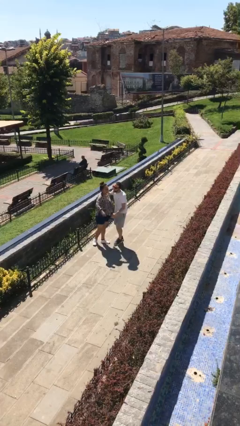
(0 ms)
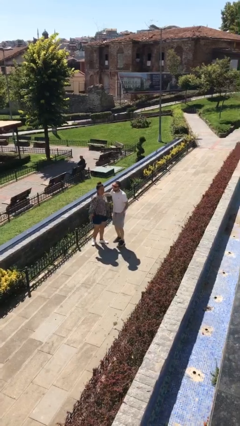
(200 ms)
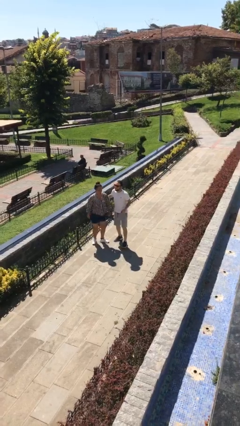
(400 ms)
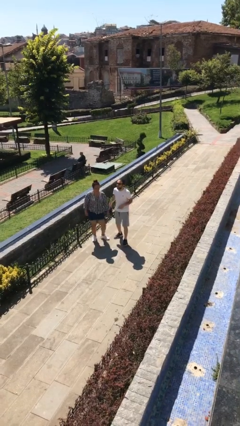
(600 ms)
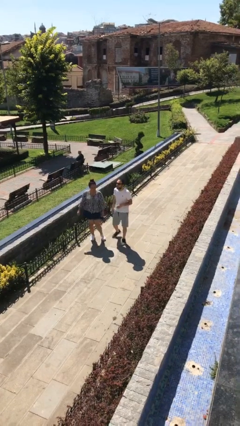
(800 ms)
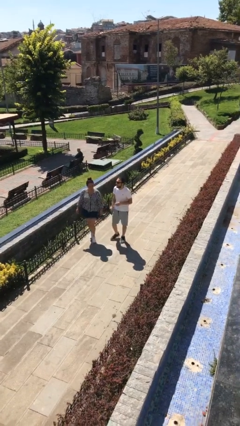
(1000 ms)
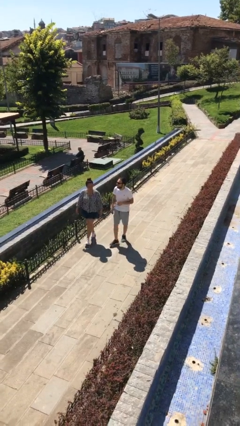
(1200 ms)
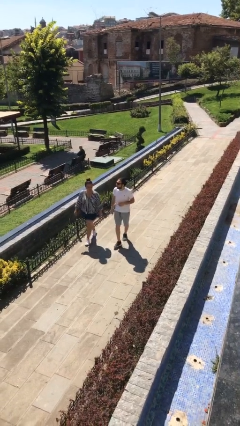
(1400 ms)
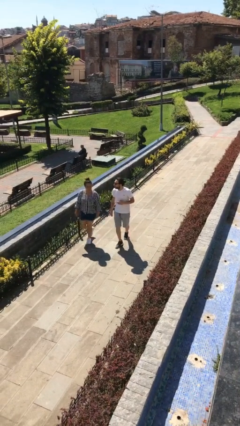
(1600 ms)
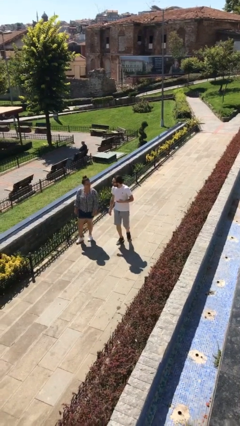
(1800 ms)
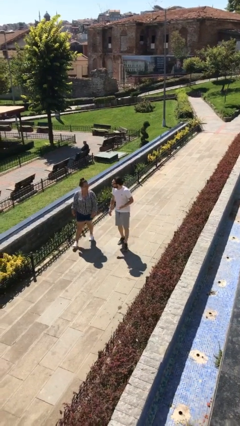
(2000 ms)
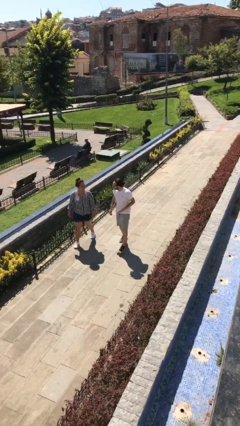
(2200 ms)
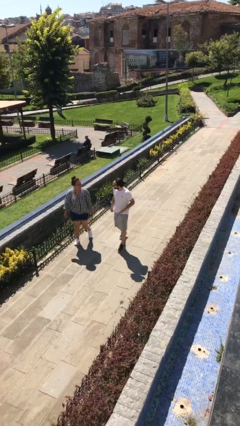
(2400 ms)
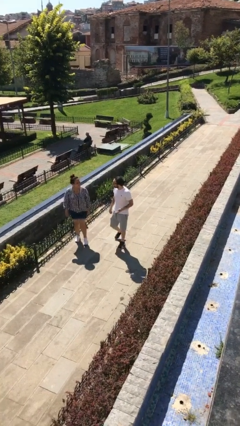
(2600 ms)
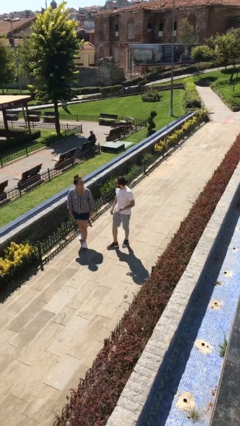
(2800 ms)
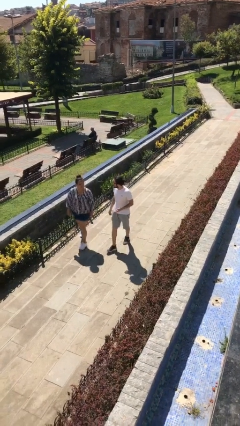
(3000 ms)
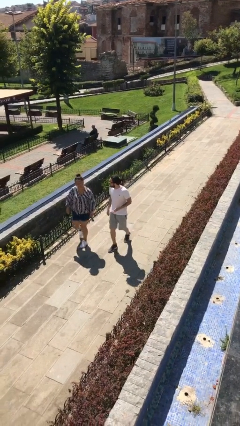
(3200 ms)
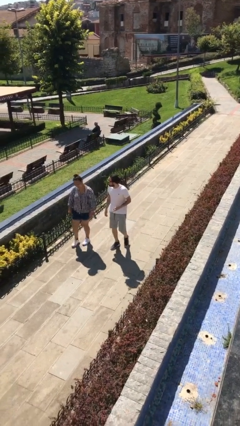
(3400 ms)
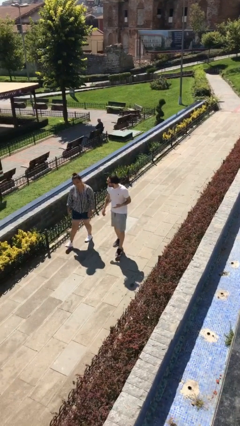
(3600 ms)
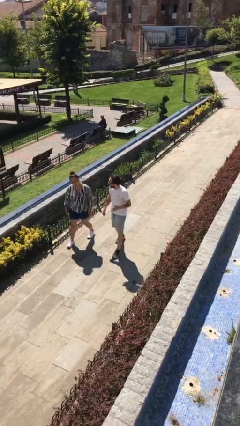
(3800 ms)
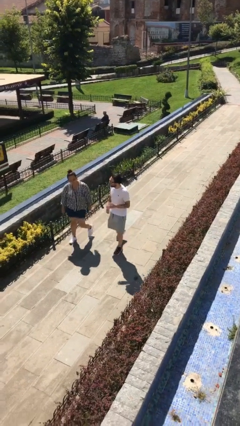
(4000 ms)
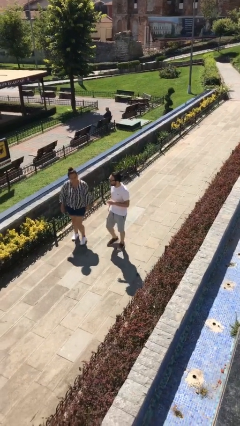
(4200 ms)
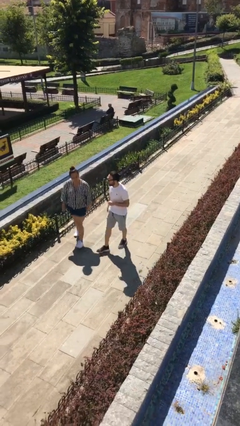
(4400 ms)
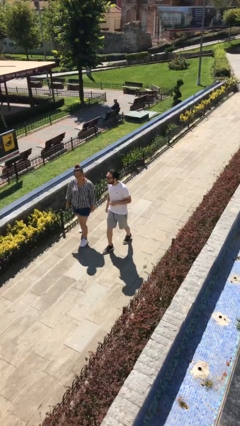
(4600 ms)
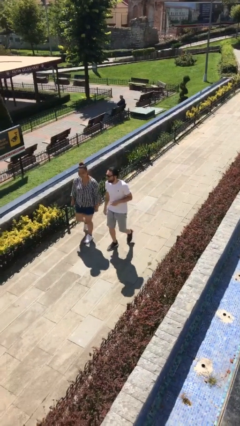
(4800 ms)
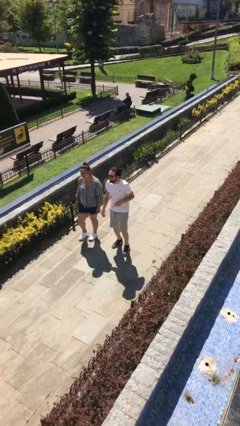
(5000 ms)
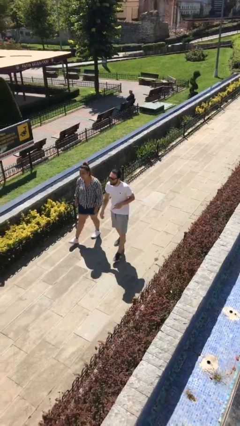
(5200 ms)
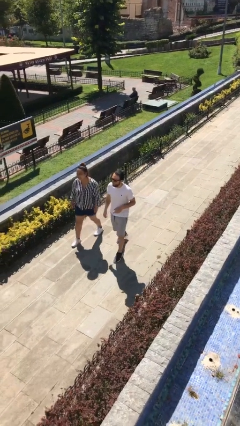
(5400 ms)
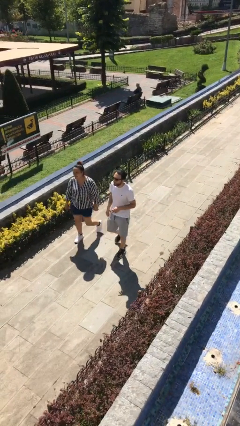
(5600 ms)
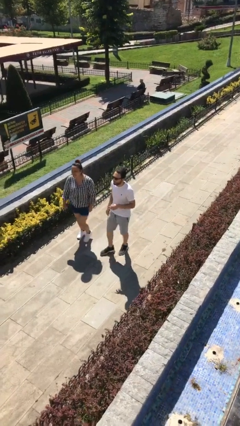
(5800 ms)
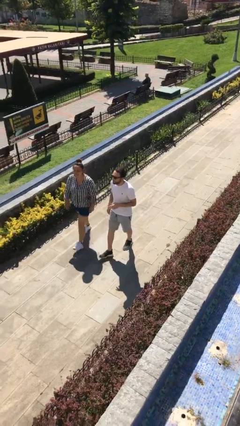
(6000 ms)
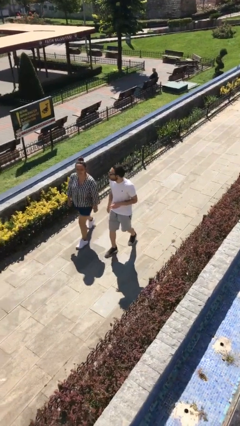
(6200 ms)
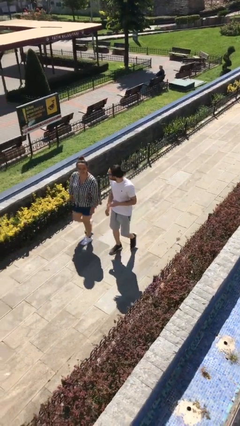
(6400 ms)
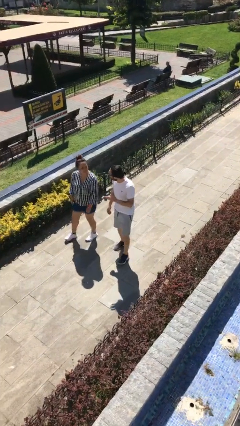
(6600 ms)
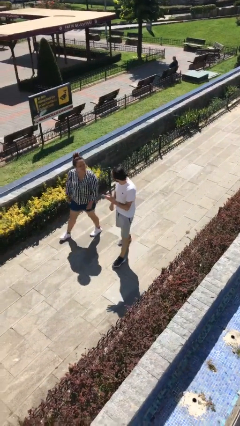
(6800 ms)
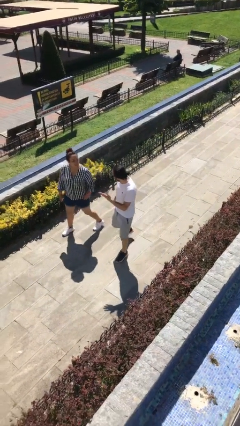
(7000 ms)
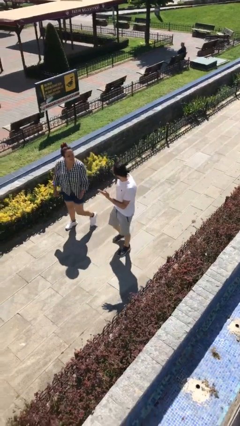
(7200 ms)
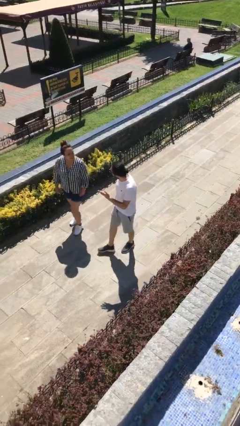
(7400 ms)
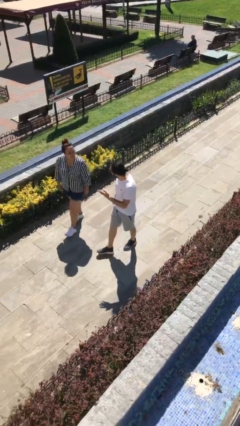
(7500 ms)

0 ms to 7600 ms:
person talks to person

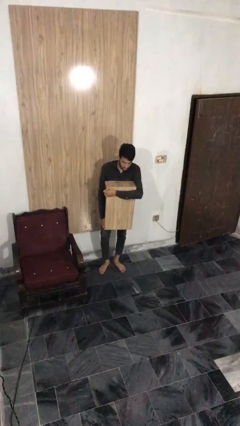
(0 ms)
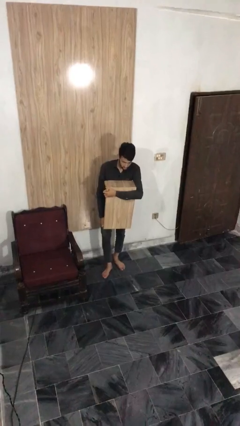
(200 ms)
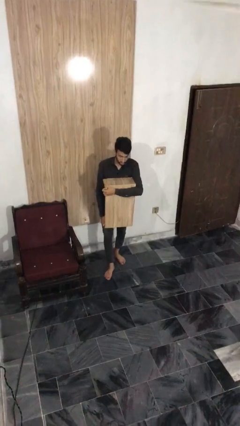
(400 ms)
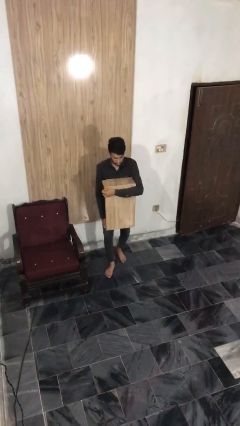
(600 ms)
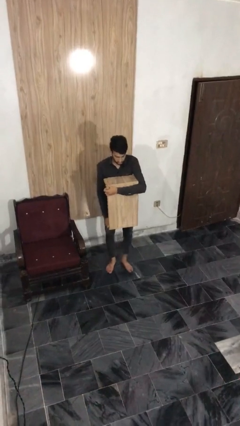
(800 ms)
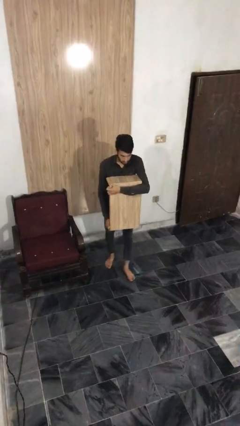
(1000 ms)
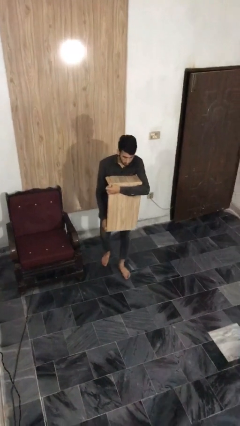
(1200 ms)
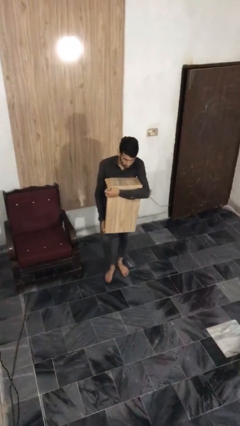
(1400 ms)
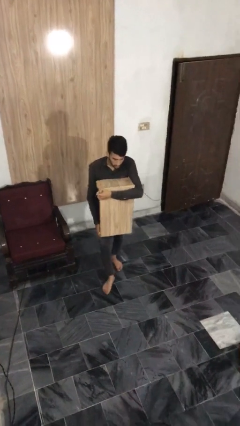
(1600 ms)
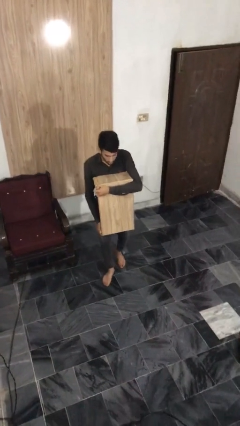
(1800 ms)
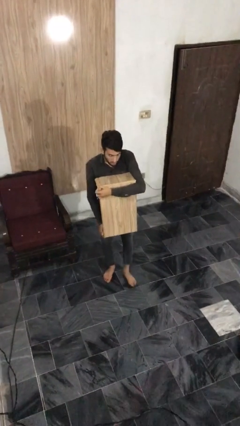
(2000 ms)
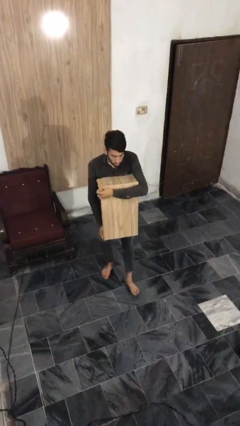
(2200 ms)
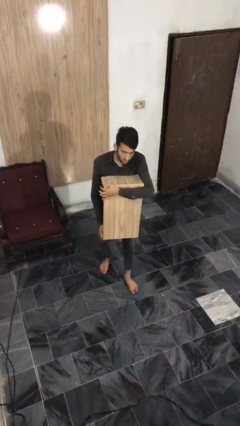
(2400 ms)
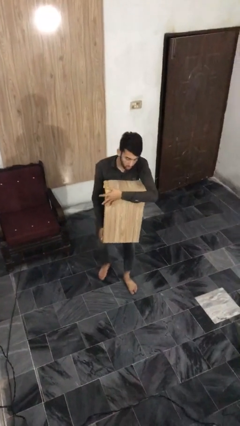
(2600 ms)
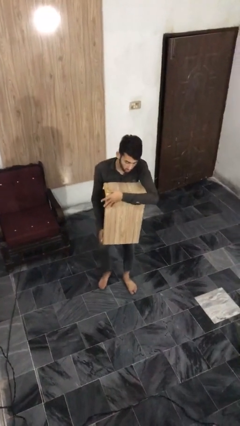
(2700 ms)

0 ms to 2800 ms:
person carries heavy object

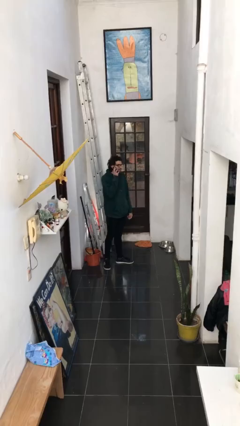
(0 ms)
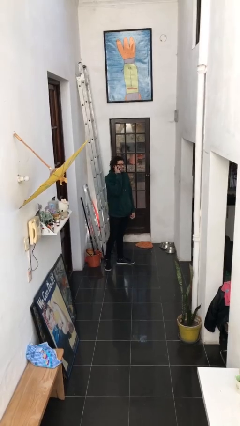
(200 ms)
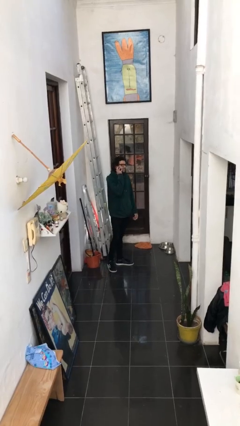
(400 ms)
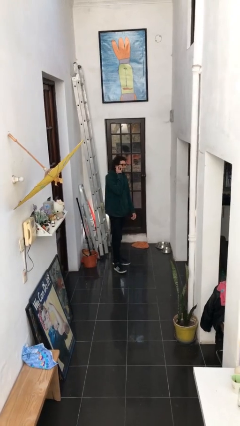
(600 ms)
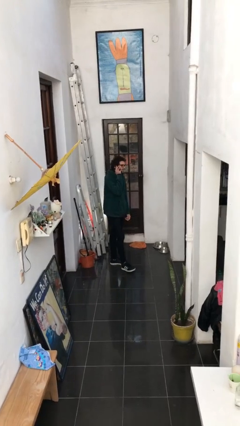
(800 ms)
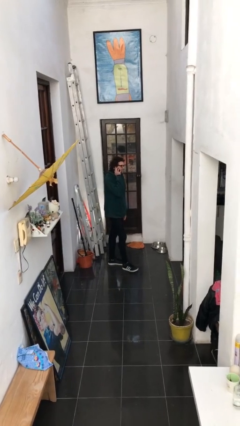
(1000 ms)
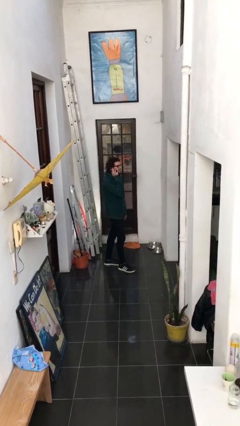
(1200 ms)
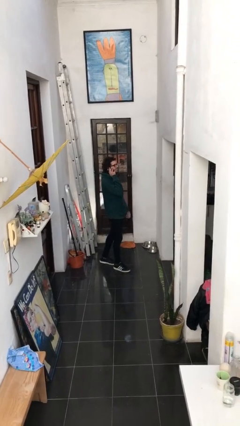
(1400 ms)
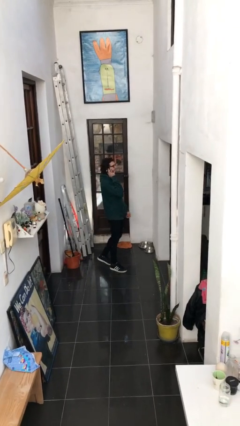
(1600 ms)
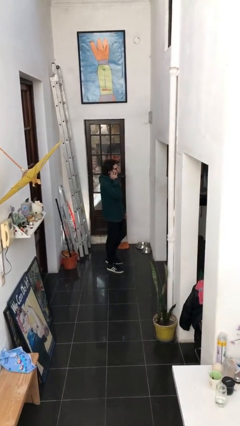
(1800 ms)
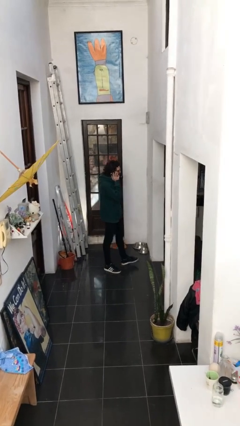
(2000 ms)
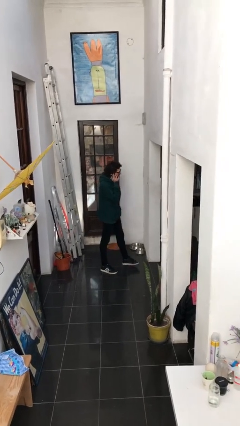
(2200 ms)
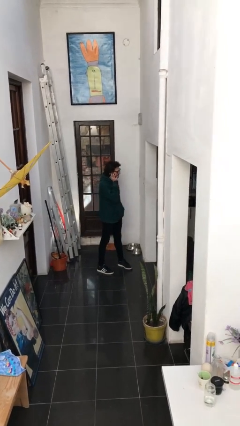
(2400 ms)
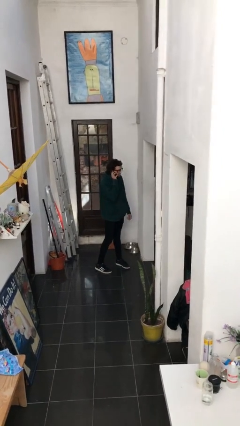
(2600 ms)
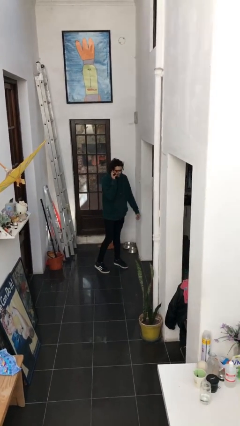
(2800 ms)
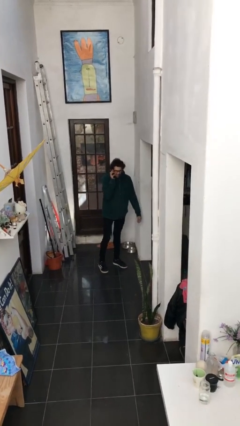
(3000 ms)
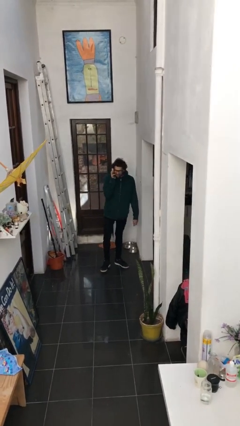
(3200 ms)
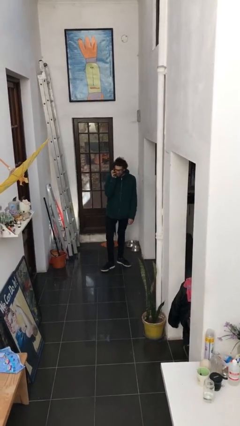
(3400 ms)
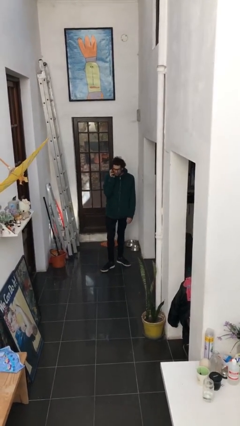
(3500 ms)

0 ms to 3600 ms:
person talks on phone

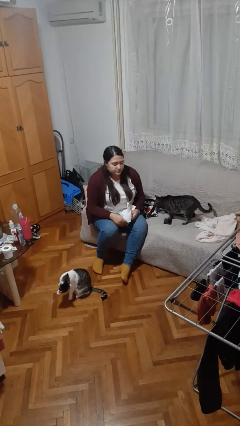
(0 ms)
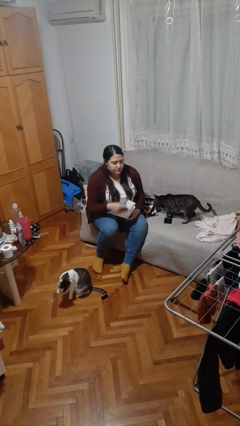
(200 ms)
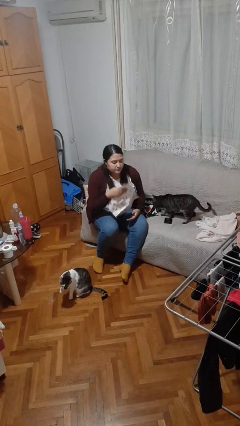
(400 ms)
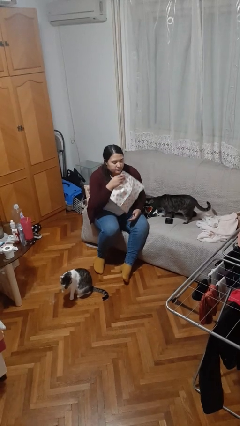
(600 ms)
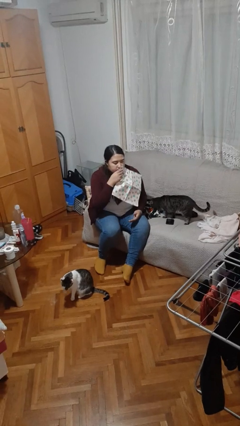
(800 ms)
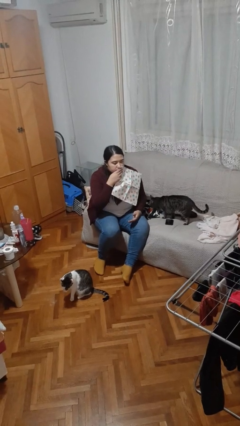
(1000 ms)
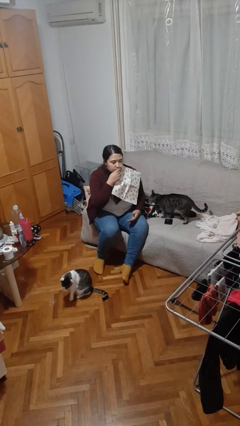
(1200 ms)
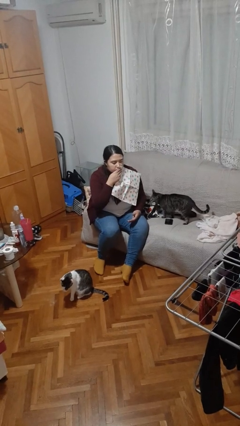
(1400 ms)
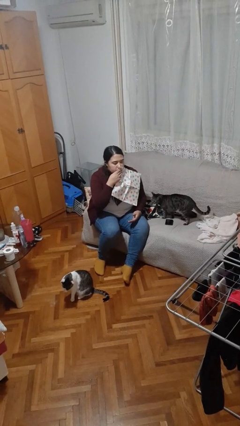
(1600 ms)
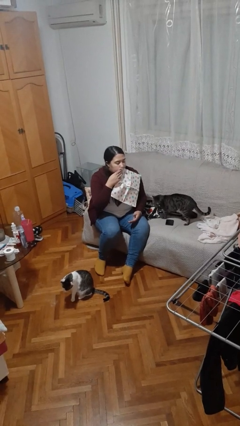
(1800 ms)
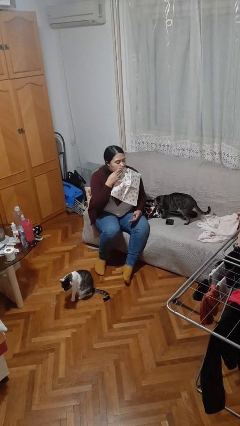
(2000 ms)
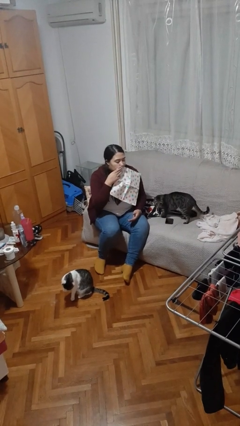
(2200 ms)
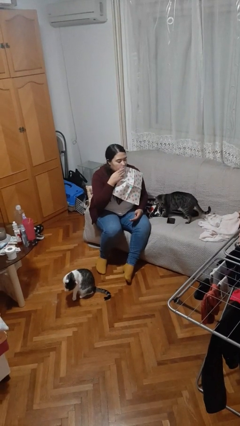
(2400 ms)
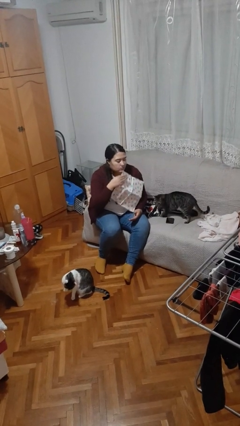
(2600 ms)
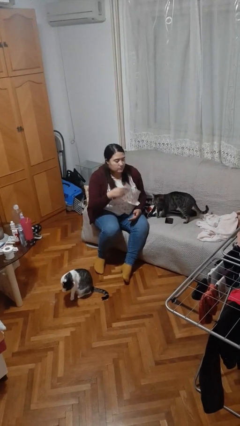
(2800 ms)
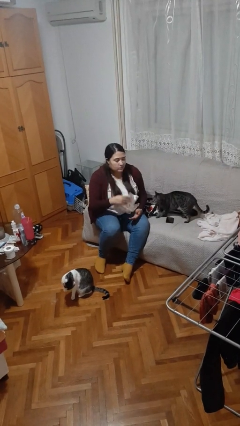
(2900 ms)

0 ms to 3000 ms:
person wipes mouth with napkin

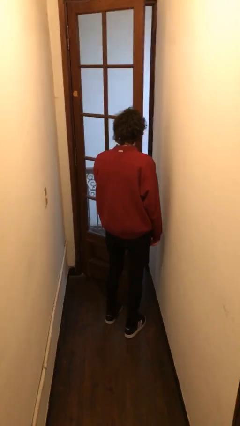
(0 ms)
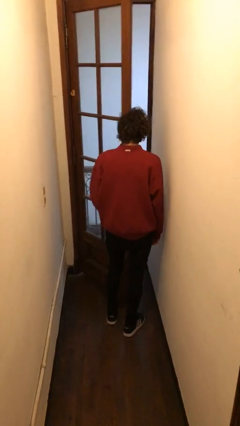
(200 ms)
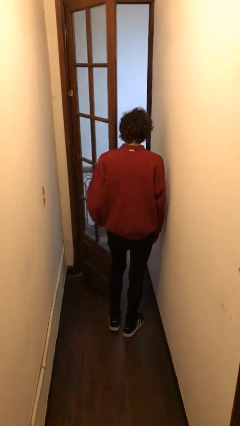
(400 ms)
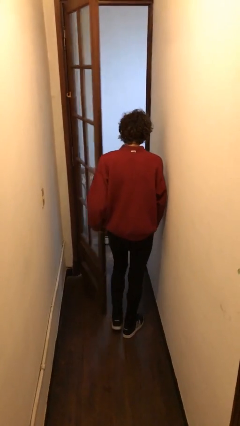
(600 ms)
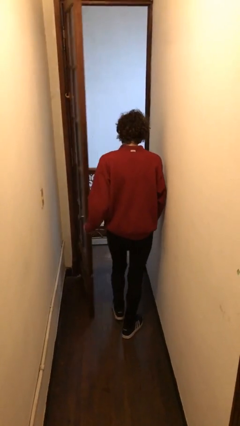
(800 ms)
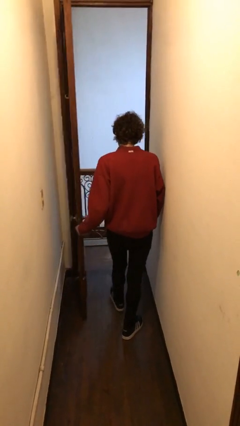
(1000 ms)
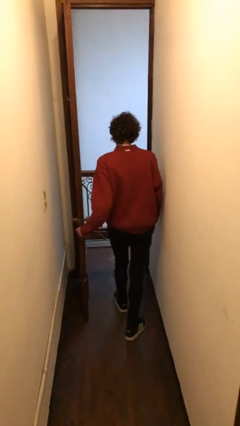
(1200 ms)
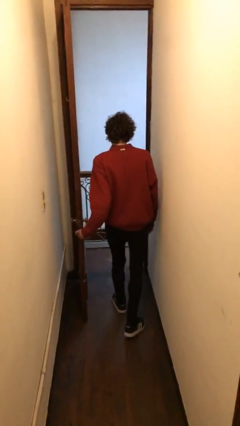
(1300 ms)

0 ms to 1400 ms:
person opens facility door
